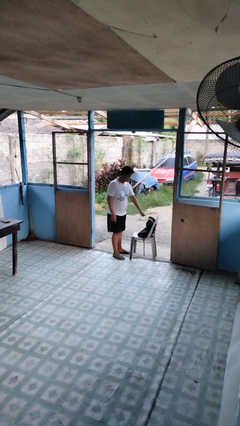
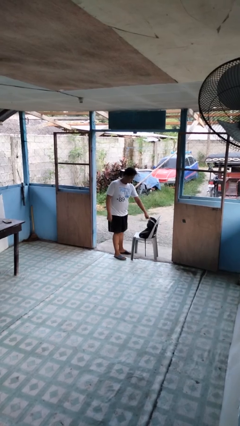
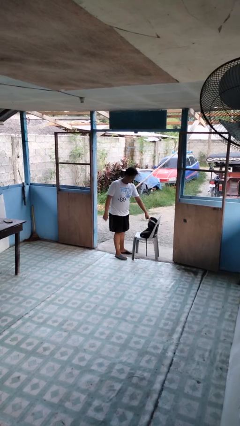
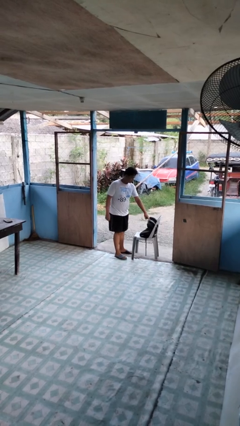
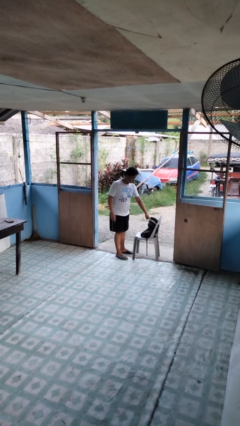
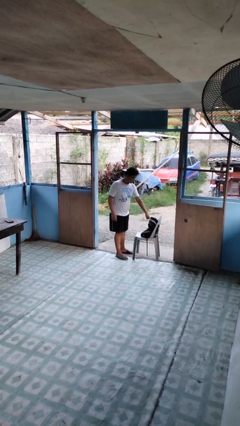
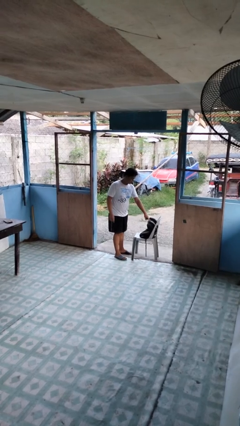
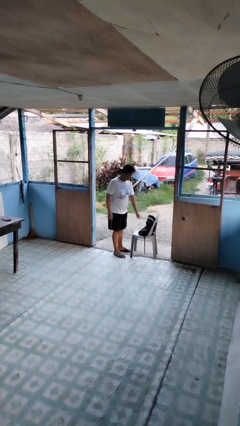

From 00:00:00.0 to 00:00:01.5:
person taps object with finger

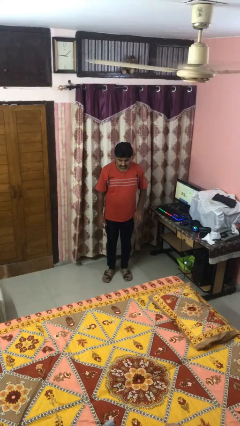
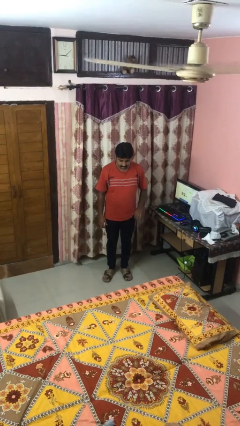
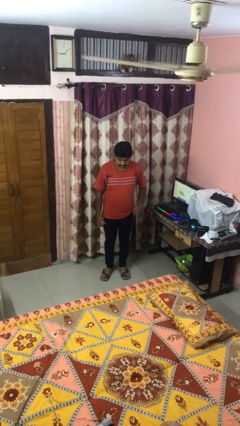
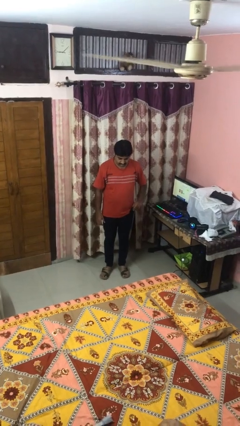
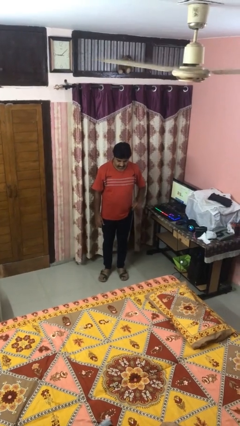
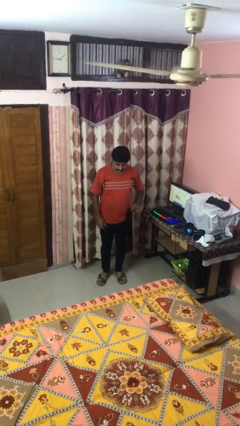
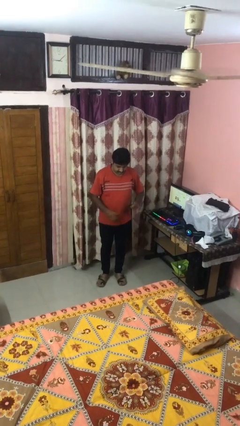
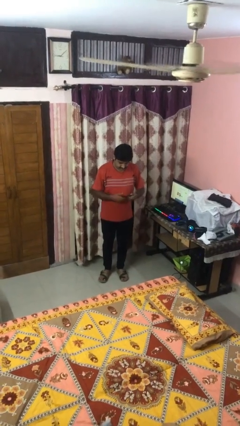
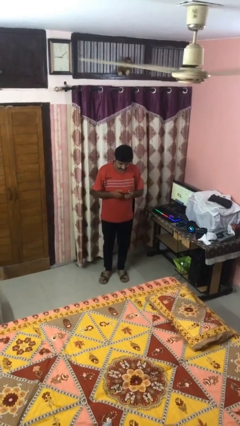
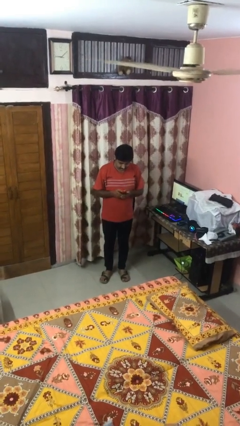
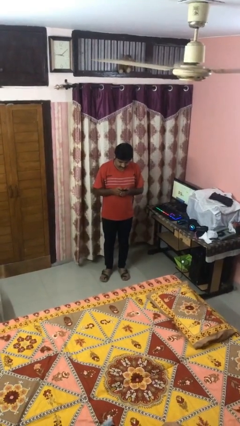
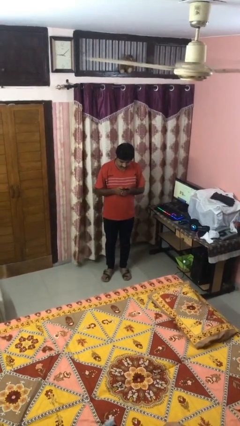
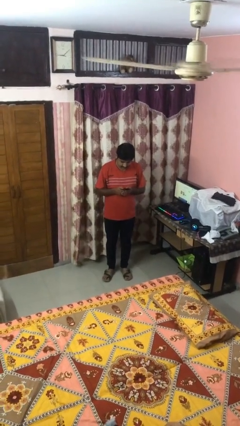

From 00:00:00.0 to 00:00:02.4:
person takes phone from pocket

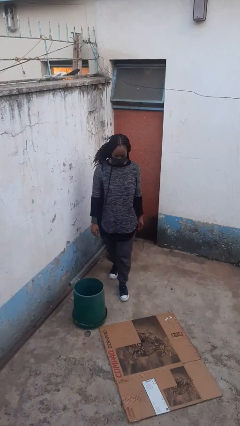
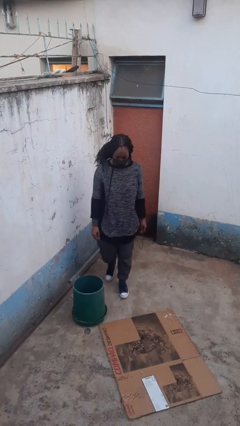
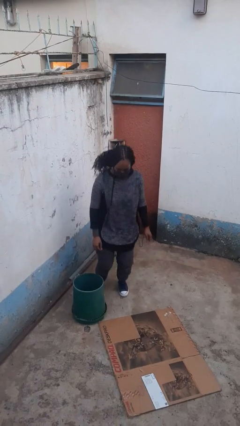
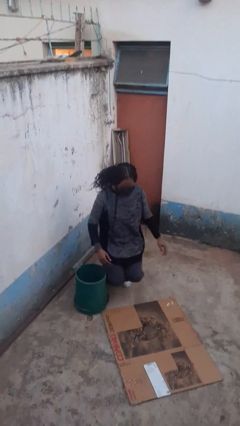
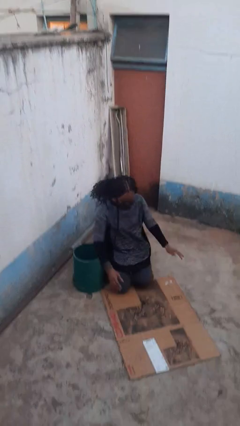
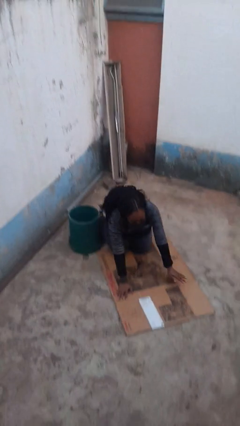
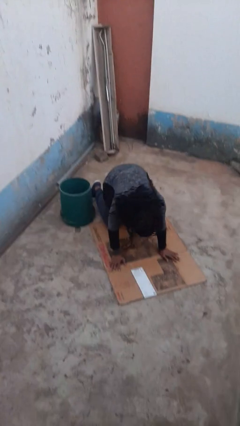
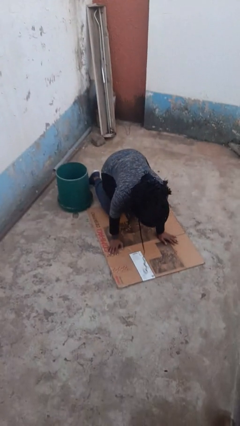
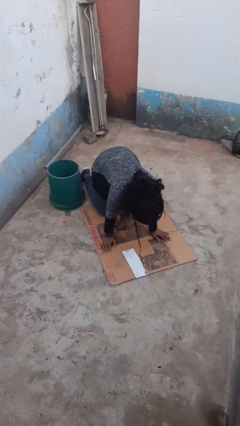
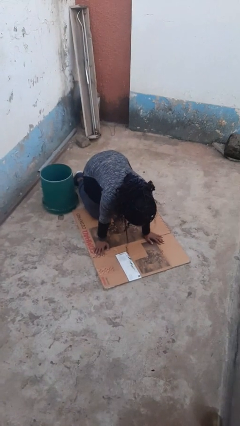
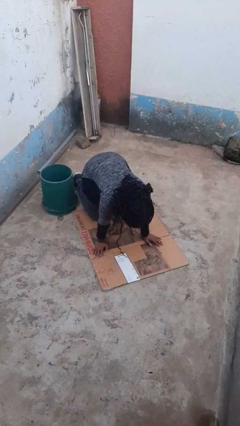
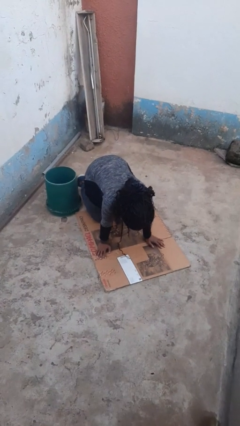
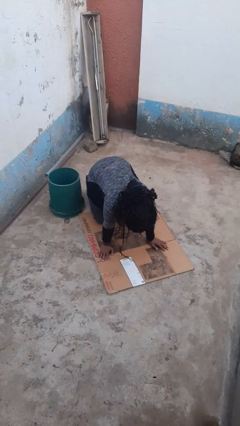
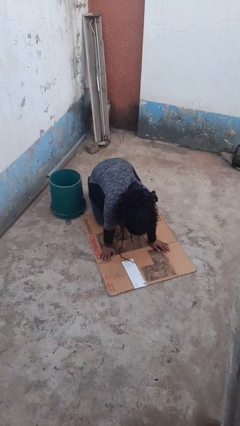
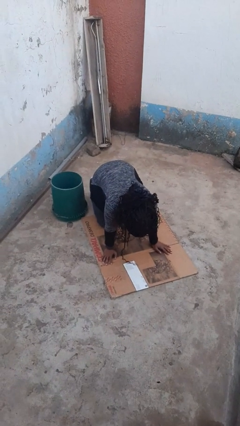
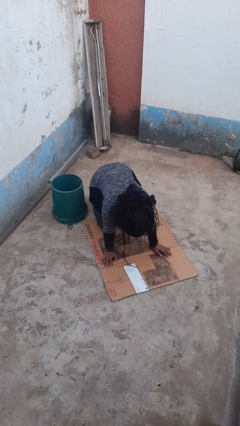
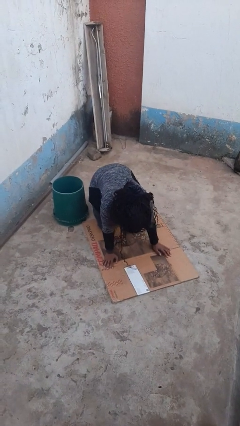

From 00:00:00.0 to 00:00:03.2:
person trips on object on floor

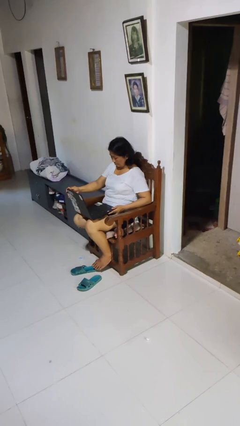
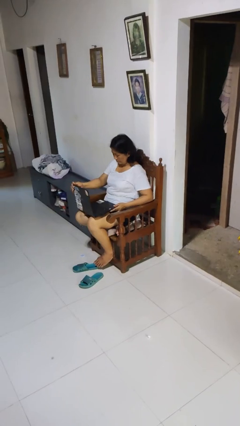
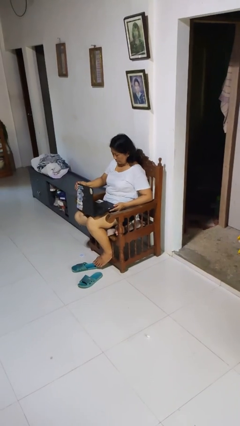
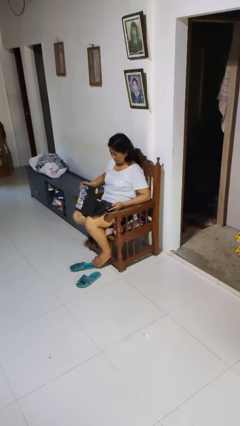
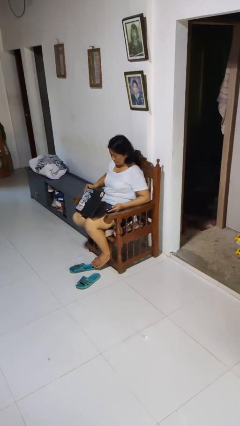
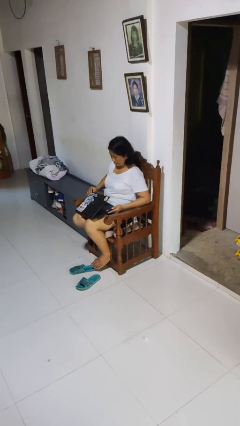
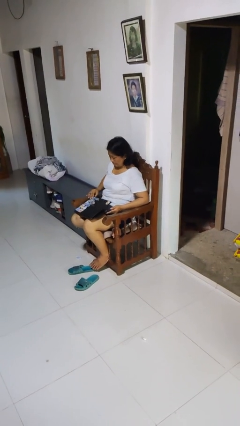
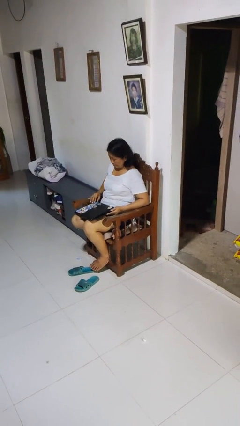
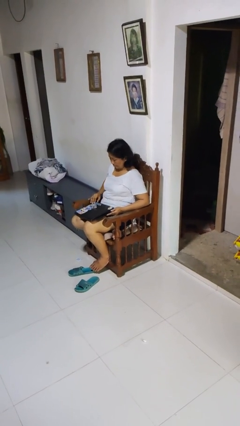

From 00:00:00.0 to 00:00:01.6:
person closes laptop

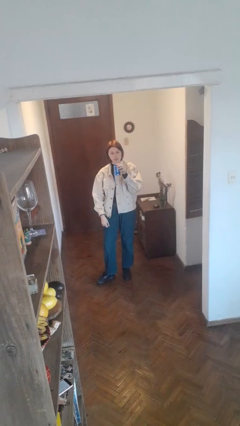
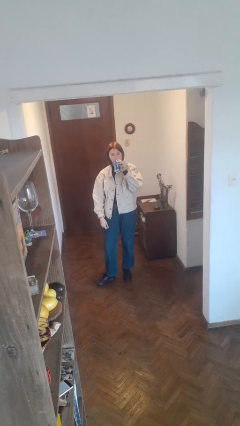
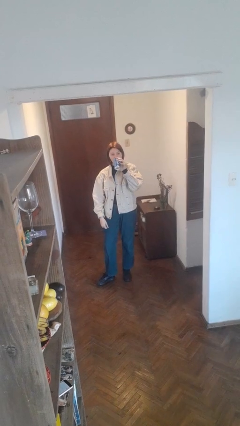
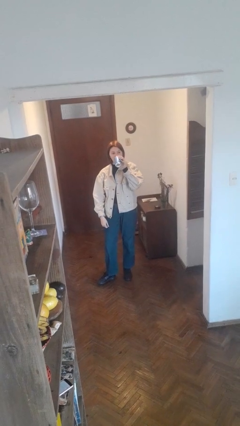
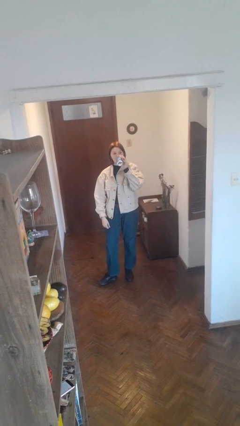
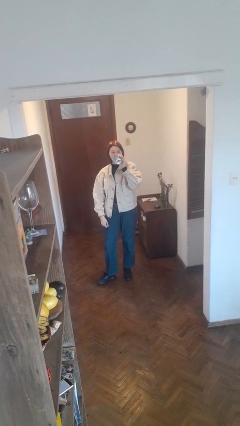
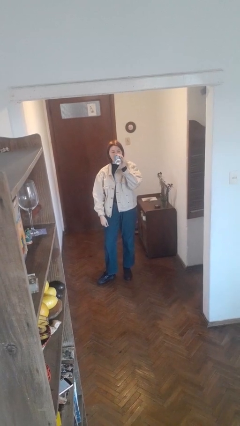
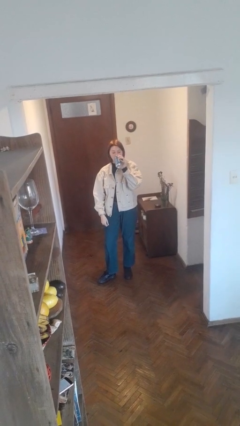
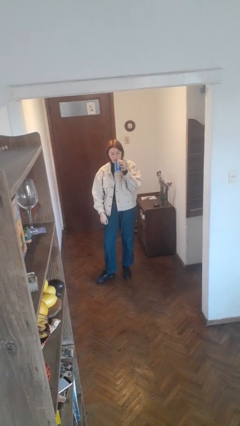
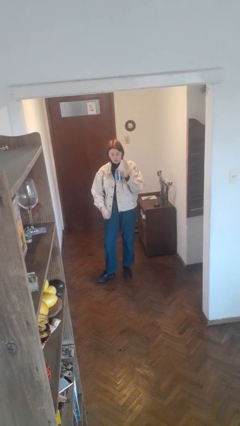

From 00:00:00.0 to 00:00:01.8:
person drinks from beverage can

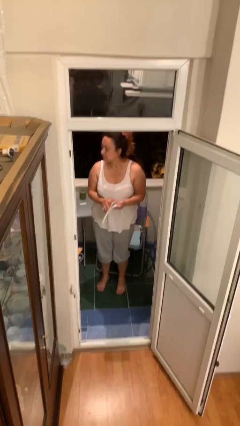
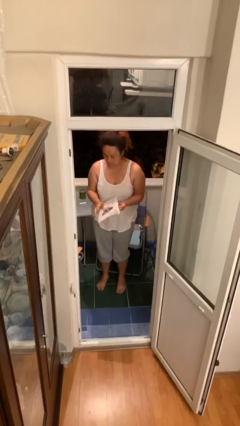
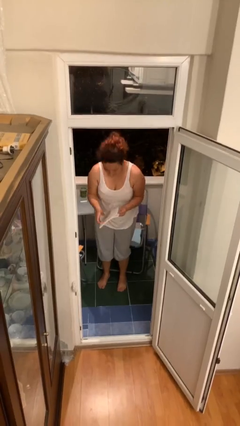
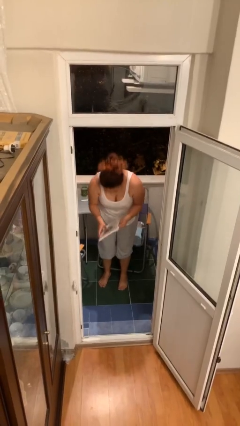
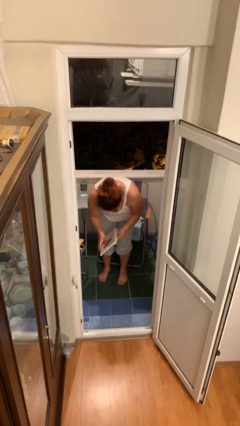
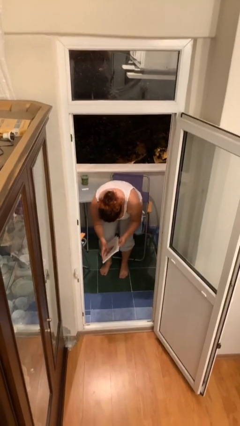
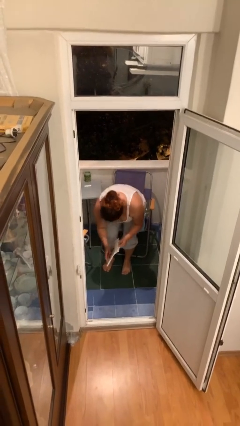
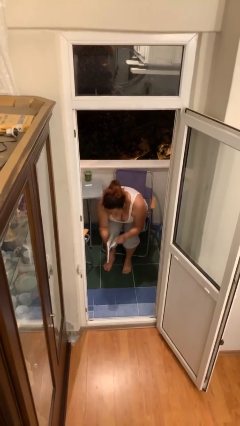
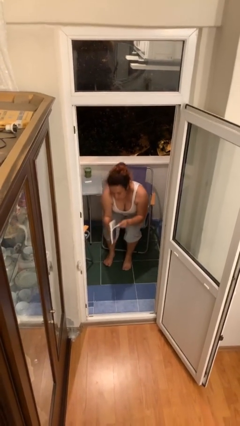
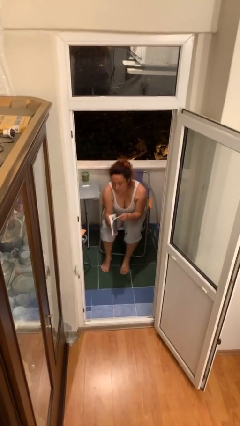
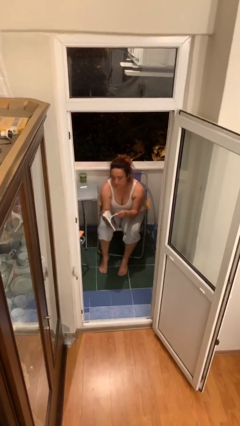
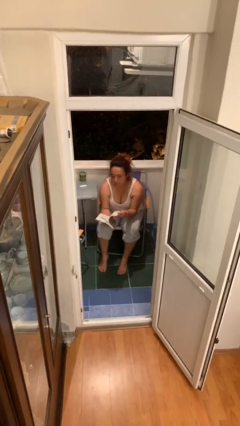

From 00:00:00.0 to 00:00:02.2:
person sits down

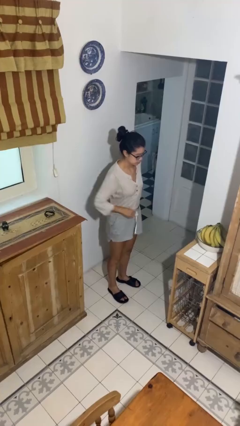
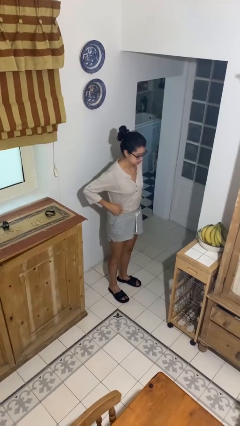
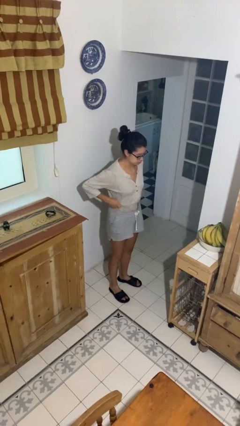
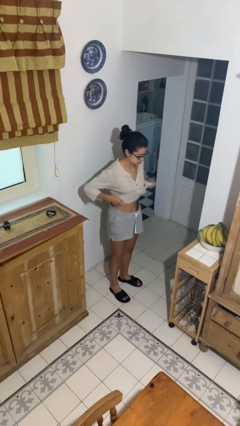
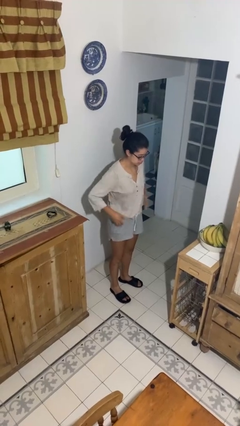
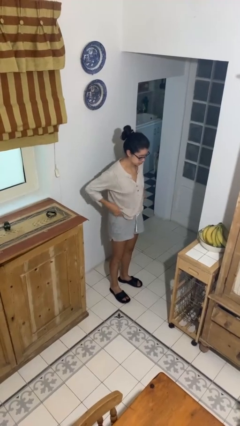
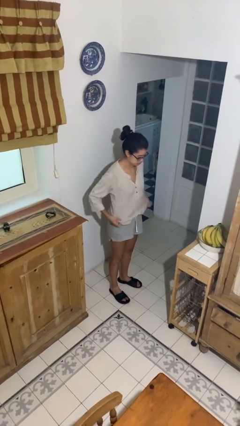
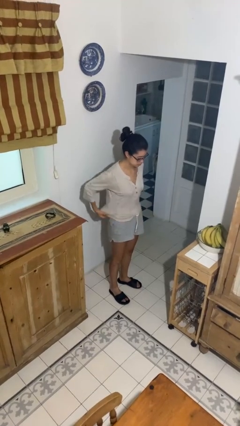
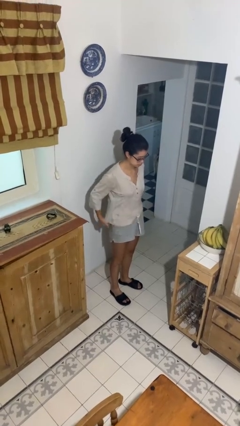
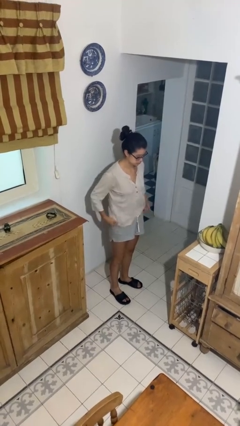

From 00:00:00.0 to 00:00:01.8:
person untucks shirt

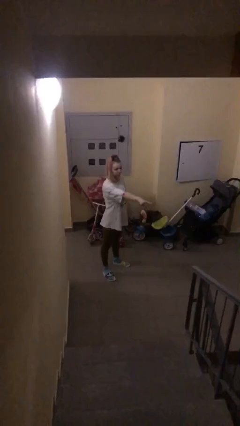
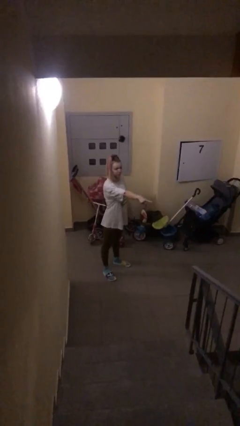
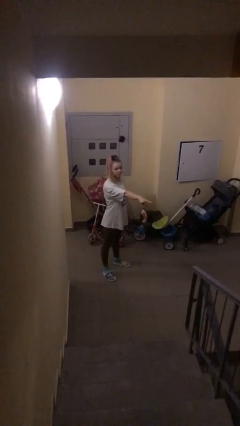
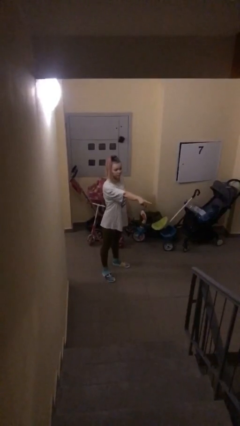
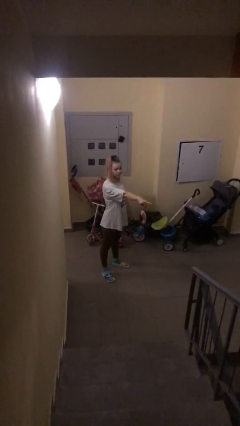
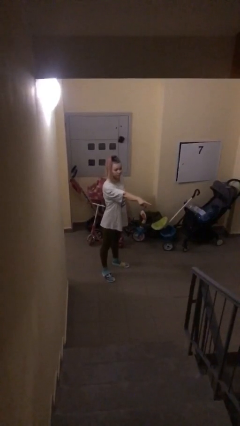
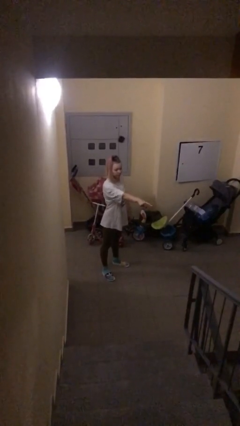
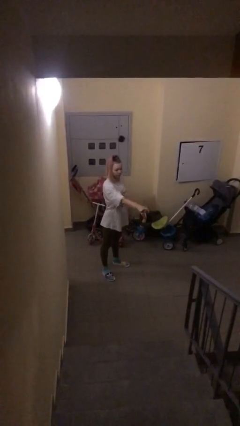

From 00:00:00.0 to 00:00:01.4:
person points at person

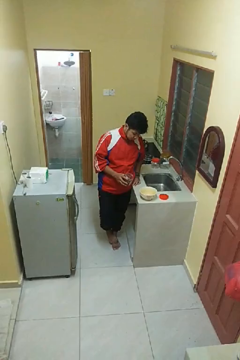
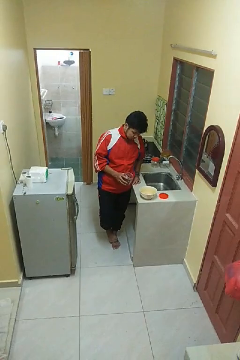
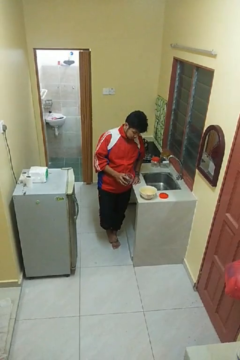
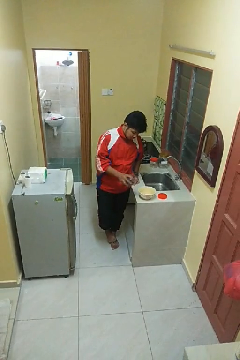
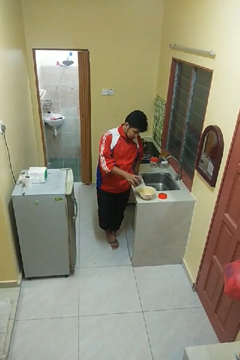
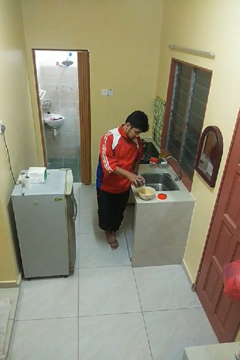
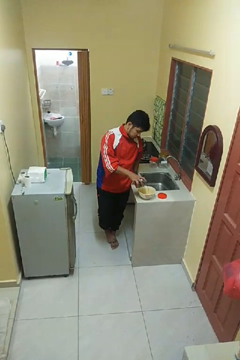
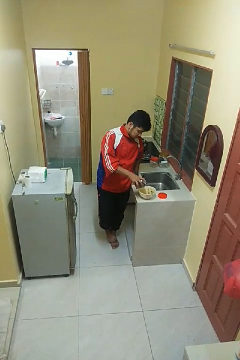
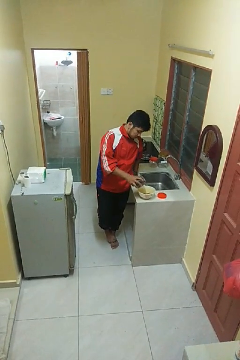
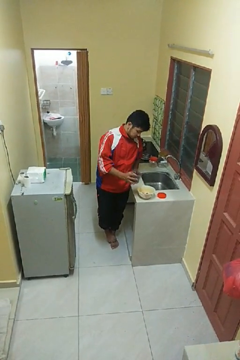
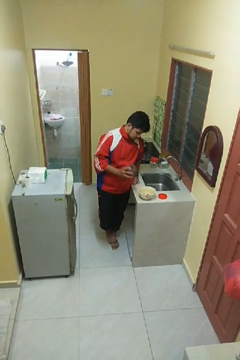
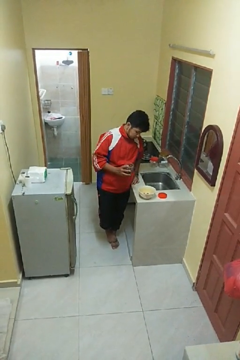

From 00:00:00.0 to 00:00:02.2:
person pours into bowl
